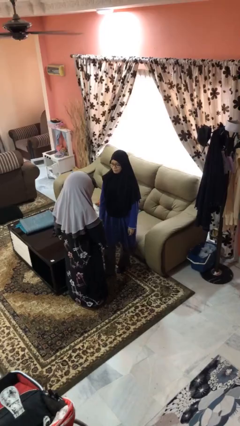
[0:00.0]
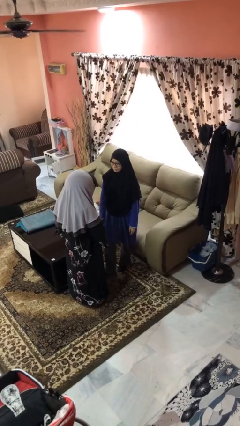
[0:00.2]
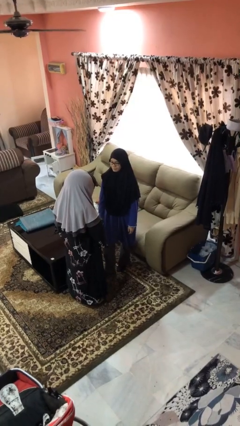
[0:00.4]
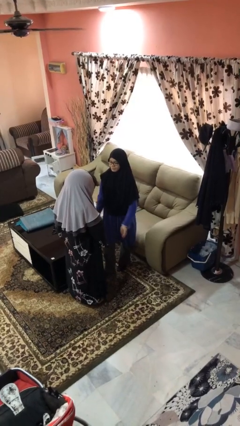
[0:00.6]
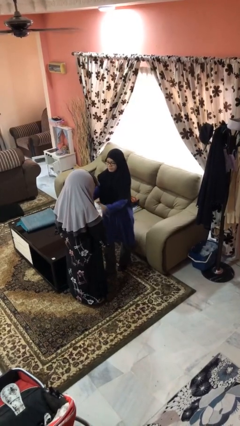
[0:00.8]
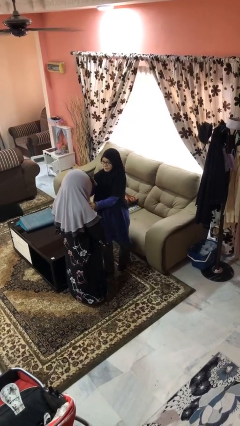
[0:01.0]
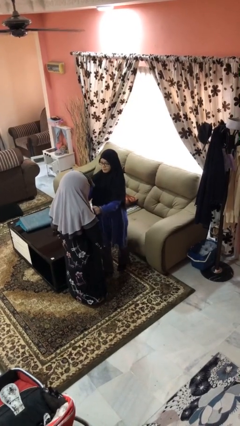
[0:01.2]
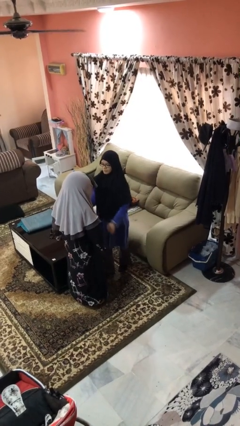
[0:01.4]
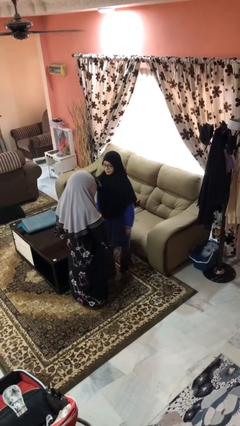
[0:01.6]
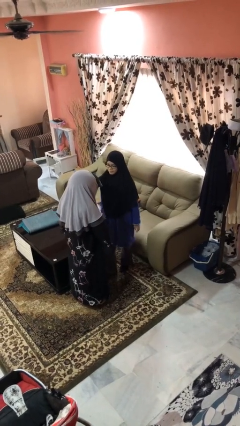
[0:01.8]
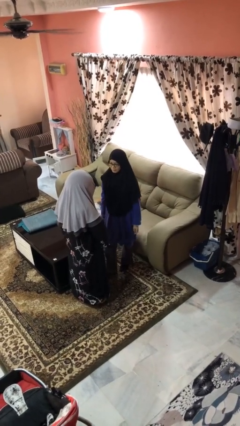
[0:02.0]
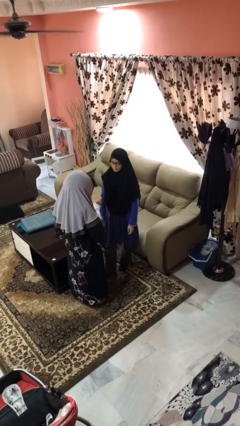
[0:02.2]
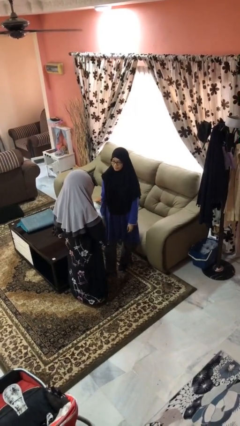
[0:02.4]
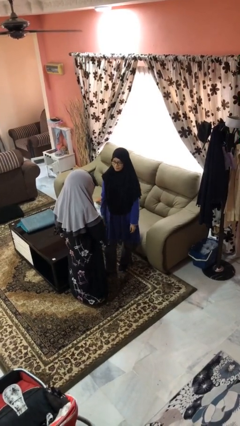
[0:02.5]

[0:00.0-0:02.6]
person shoves person

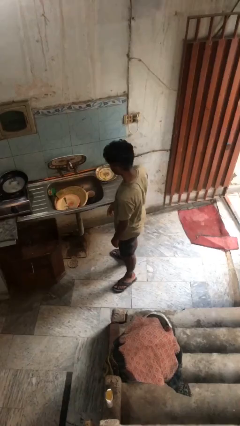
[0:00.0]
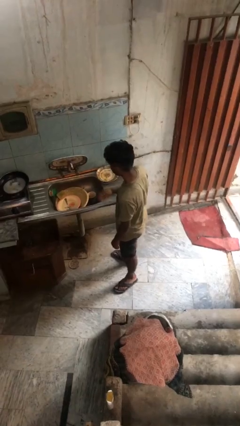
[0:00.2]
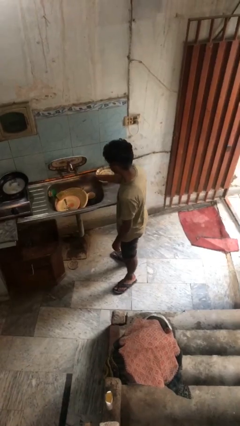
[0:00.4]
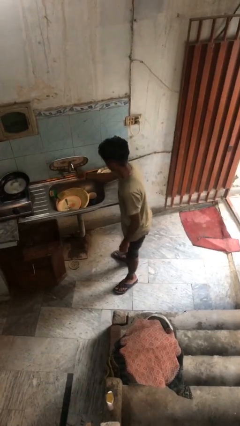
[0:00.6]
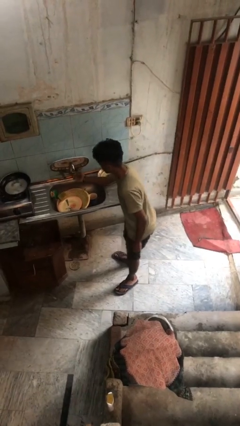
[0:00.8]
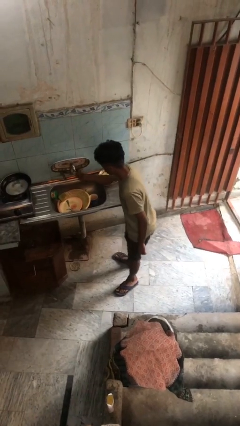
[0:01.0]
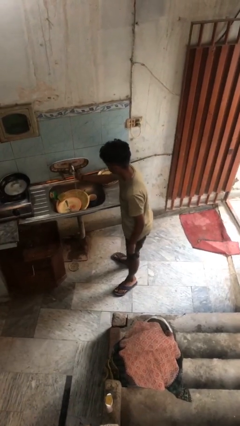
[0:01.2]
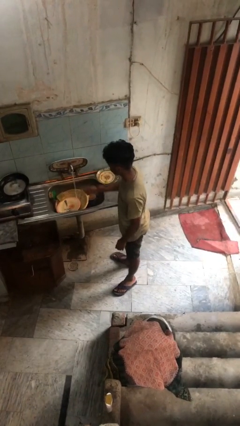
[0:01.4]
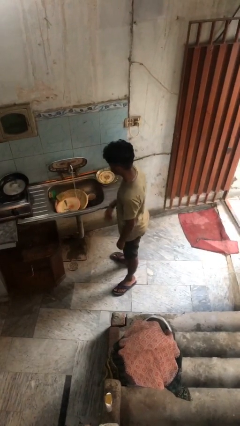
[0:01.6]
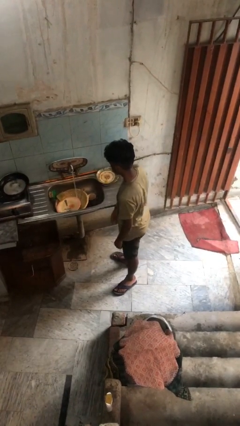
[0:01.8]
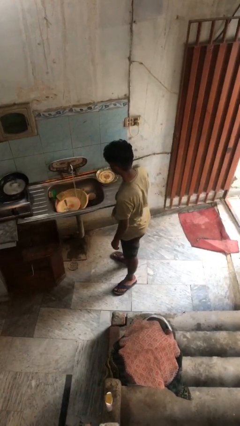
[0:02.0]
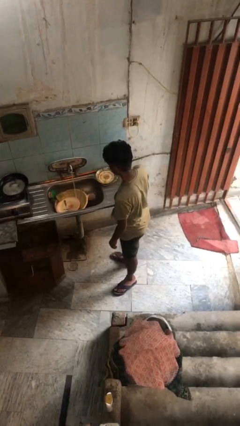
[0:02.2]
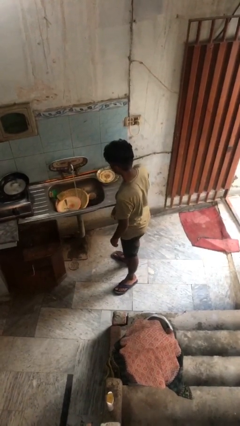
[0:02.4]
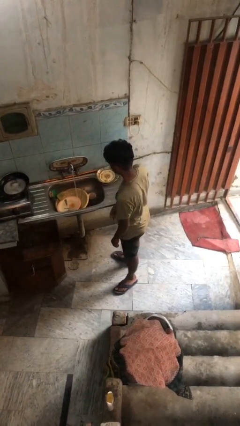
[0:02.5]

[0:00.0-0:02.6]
person turns on faucet

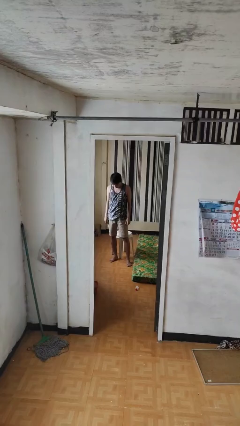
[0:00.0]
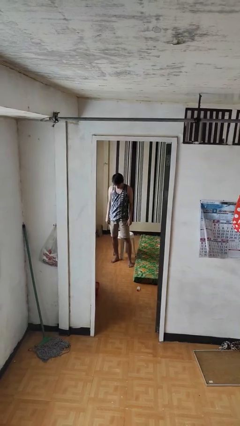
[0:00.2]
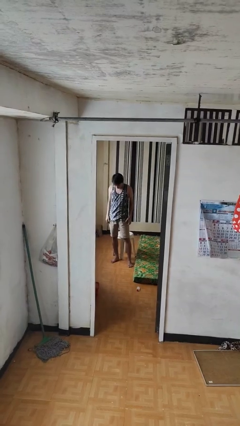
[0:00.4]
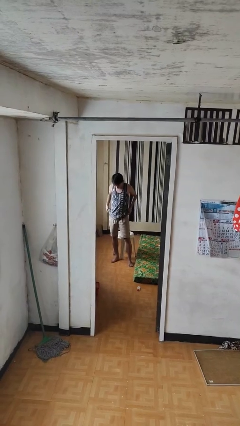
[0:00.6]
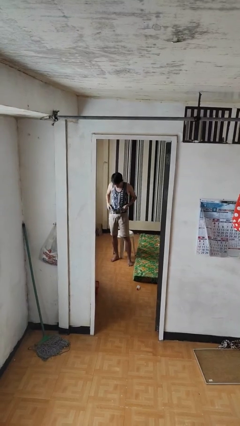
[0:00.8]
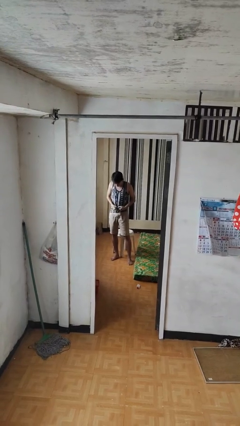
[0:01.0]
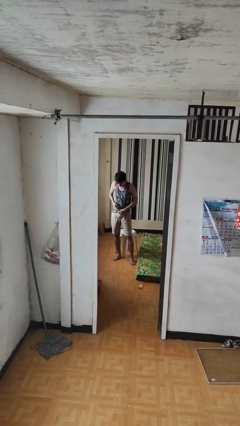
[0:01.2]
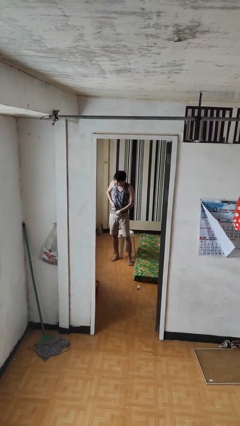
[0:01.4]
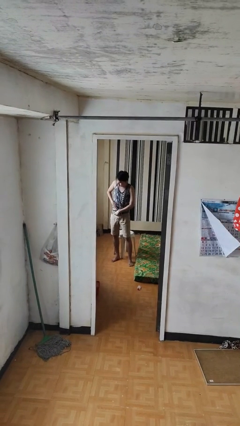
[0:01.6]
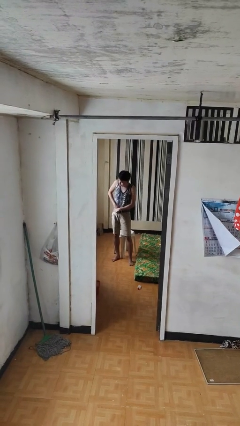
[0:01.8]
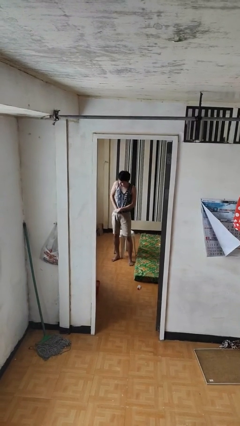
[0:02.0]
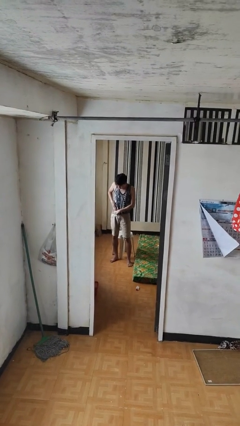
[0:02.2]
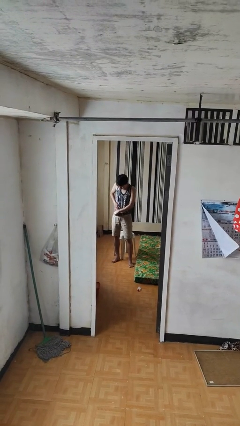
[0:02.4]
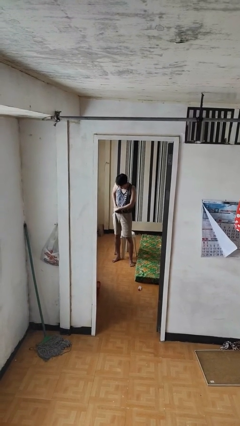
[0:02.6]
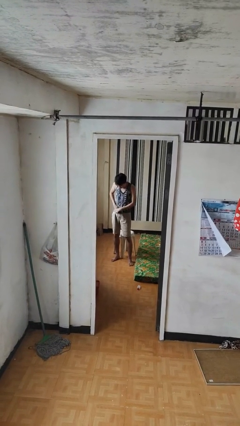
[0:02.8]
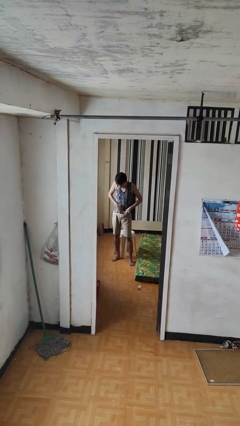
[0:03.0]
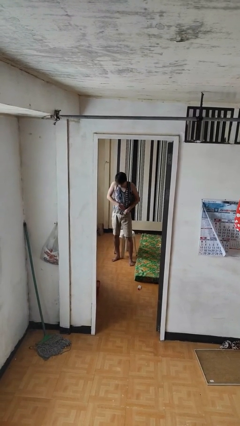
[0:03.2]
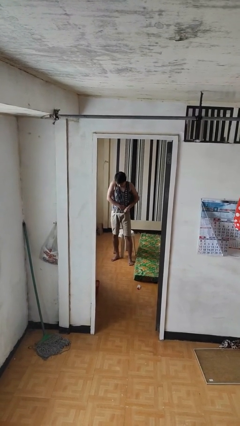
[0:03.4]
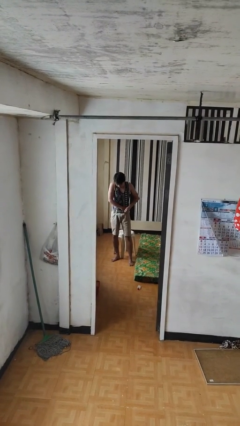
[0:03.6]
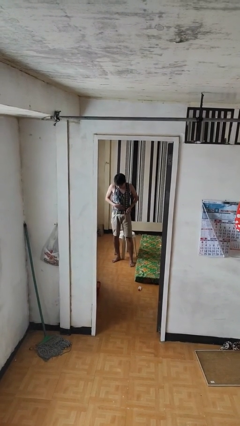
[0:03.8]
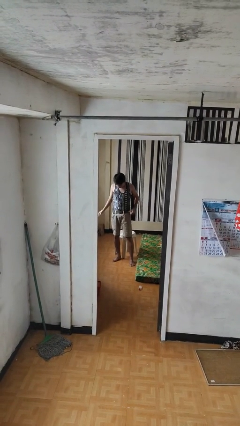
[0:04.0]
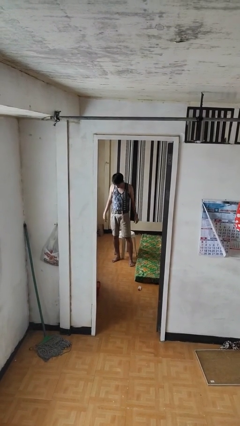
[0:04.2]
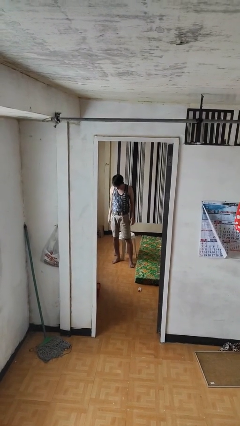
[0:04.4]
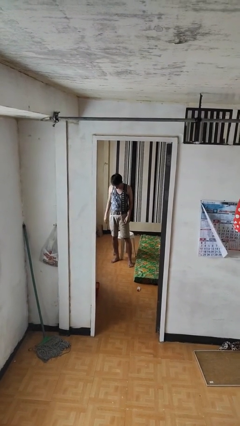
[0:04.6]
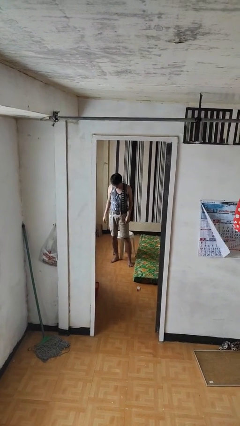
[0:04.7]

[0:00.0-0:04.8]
person tucks in shirt

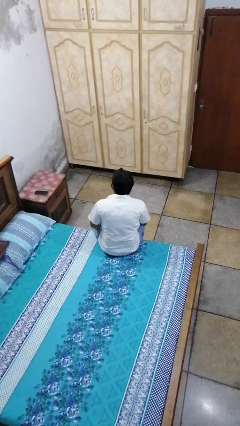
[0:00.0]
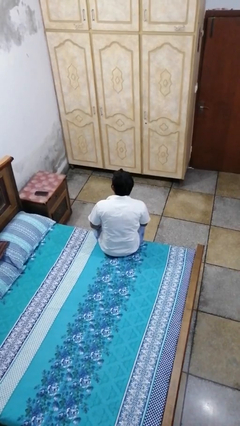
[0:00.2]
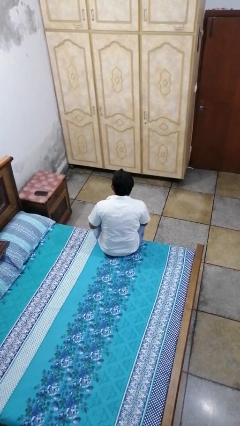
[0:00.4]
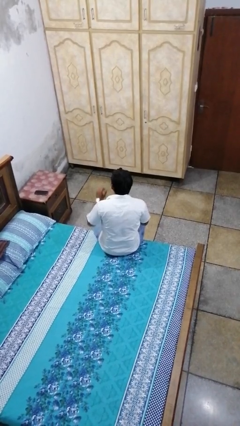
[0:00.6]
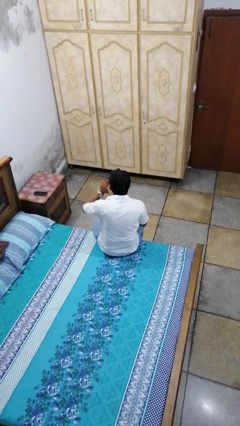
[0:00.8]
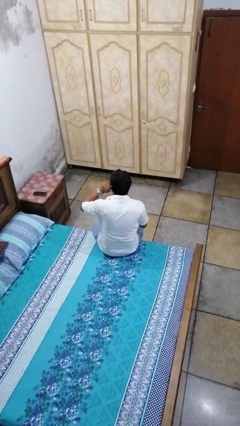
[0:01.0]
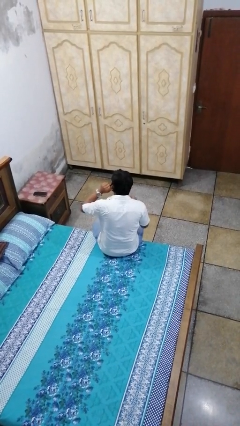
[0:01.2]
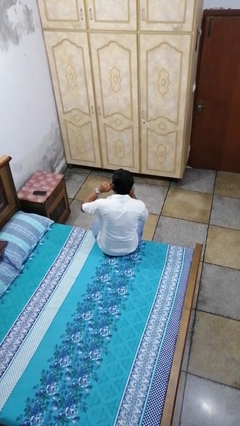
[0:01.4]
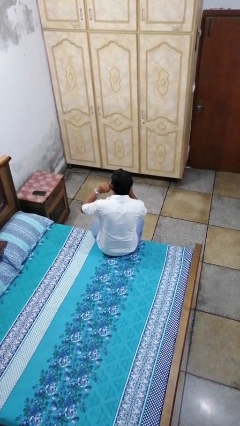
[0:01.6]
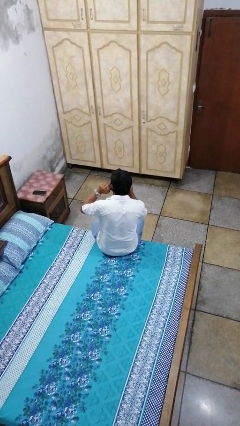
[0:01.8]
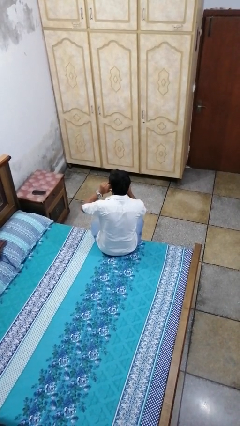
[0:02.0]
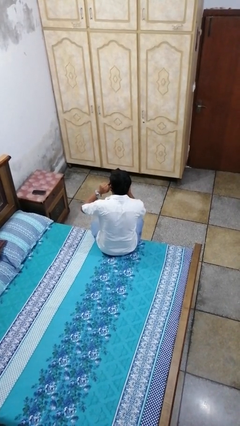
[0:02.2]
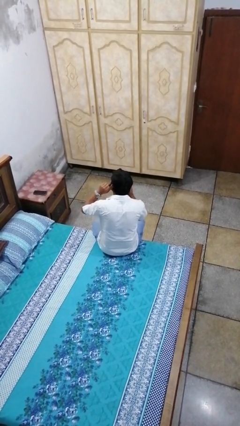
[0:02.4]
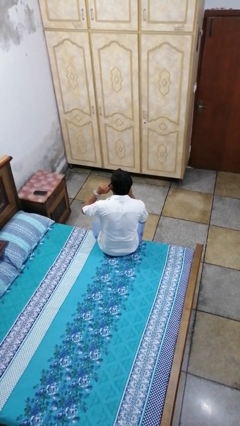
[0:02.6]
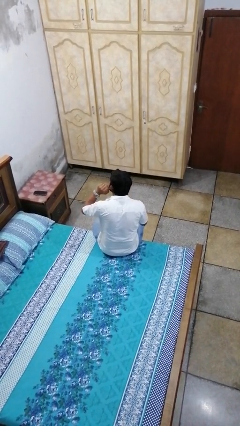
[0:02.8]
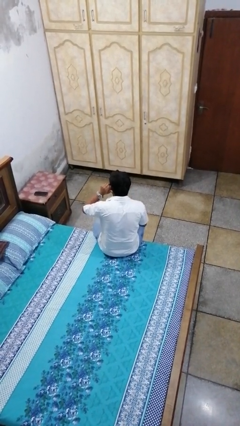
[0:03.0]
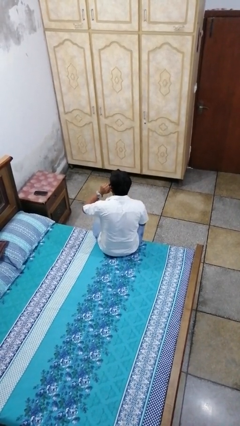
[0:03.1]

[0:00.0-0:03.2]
person touches earlobe

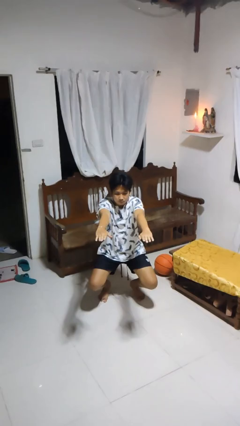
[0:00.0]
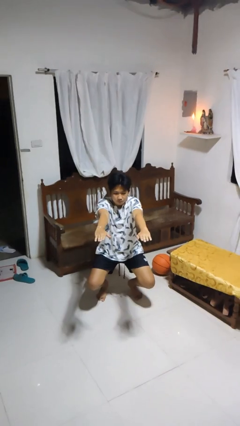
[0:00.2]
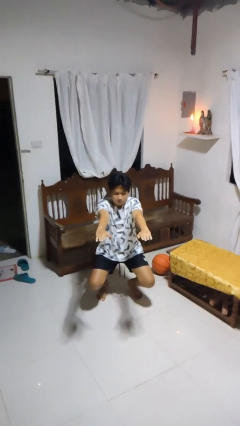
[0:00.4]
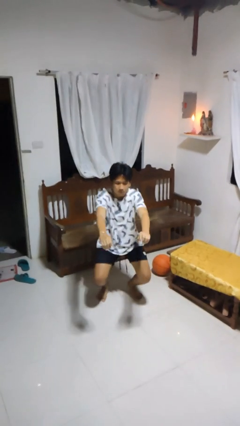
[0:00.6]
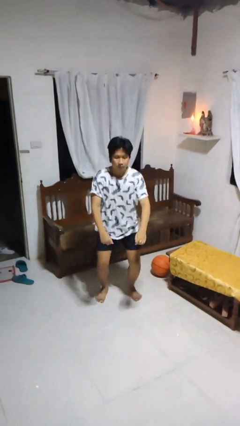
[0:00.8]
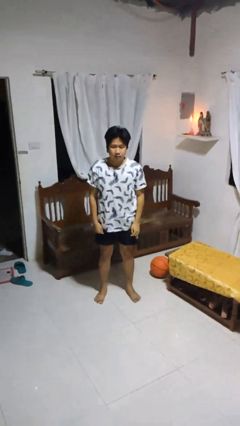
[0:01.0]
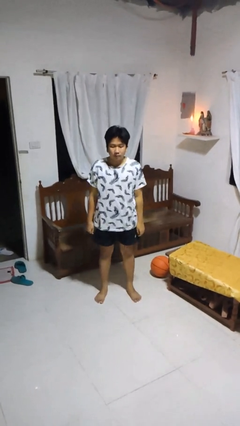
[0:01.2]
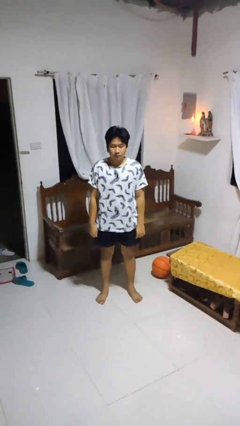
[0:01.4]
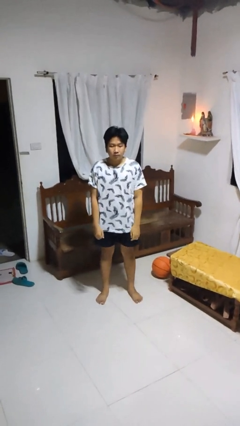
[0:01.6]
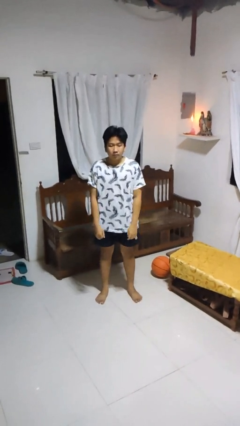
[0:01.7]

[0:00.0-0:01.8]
person stands up

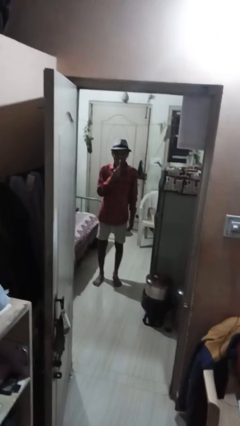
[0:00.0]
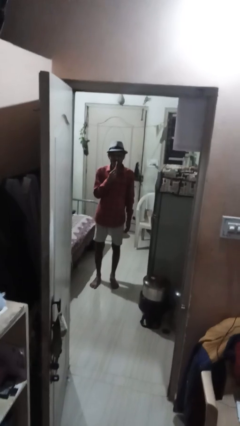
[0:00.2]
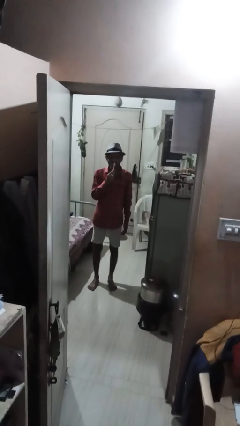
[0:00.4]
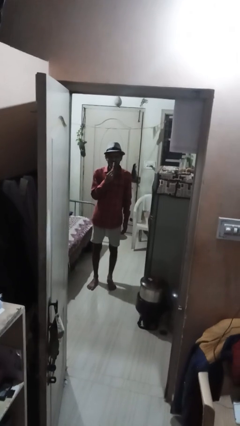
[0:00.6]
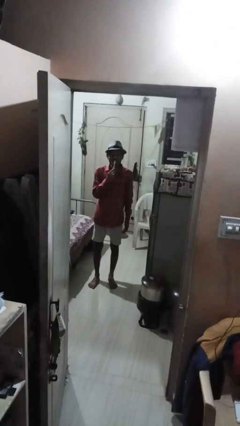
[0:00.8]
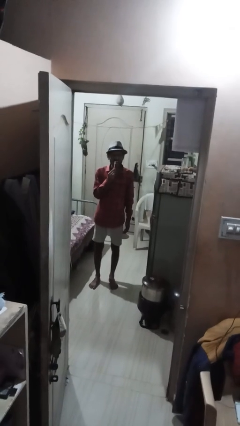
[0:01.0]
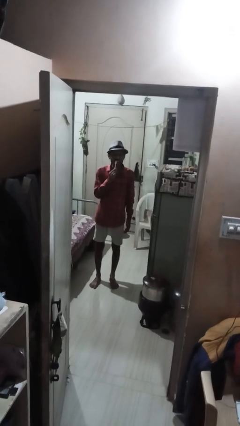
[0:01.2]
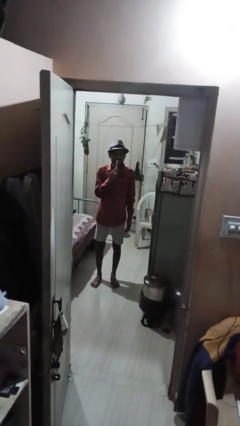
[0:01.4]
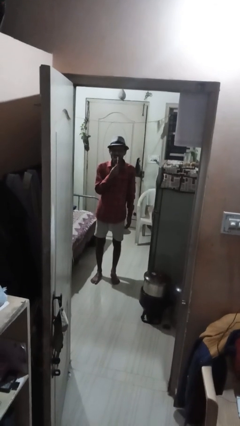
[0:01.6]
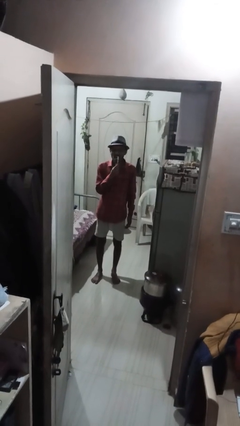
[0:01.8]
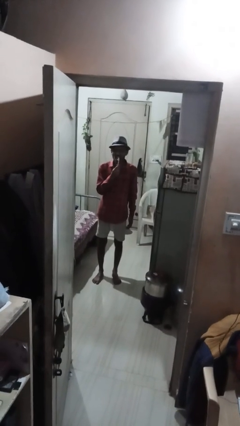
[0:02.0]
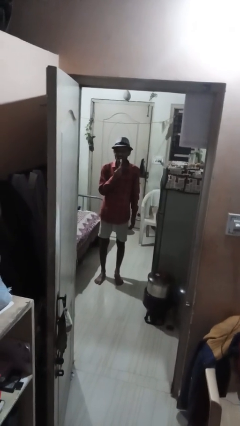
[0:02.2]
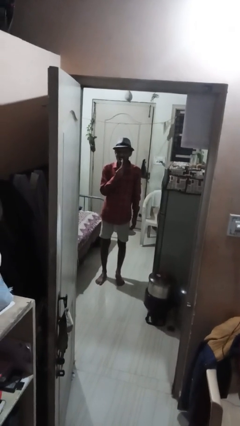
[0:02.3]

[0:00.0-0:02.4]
person brushes teeth
